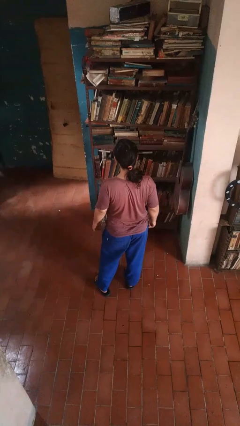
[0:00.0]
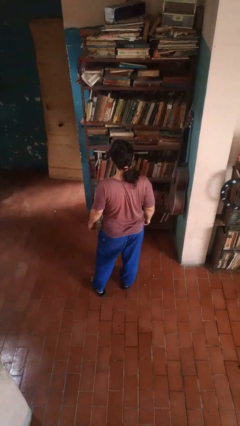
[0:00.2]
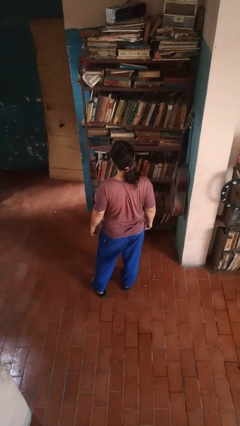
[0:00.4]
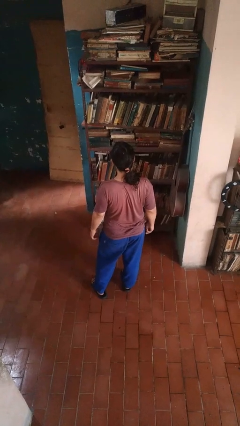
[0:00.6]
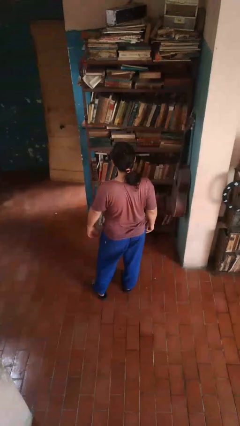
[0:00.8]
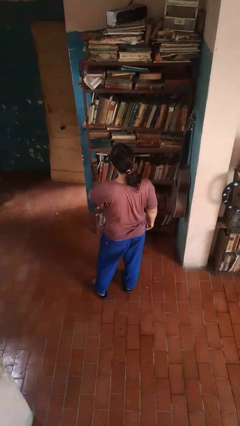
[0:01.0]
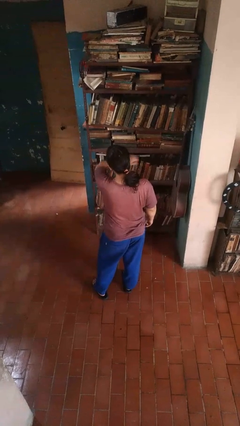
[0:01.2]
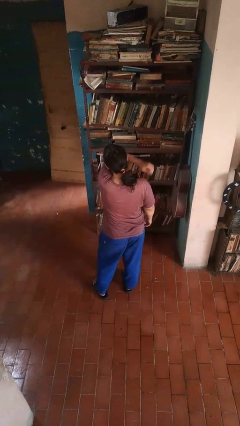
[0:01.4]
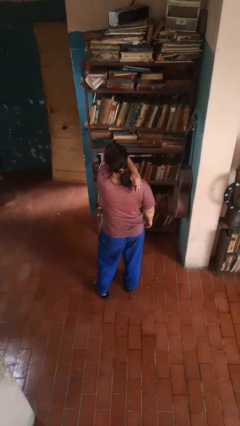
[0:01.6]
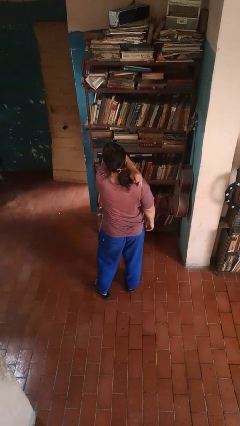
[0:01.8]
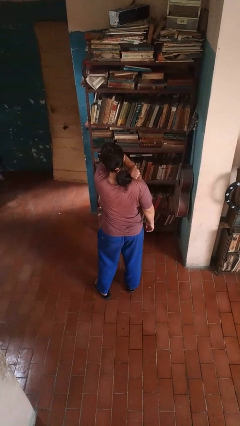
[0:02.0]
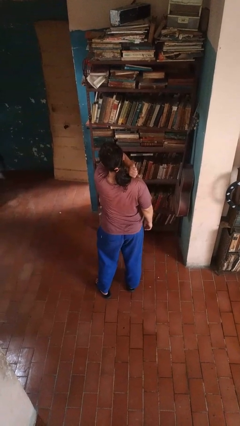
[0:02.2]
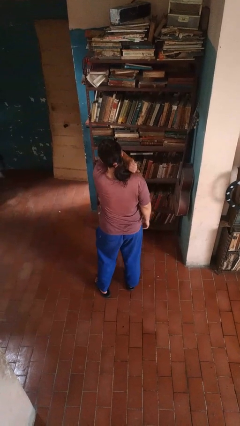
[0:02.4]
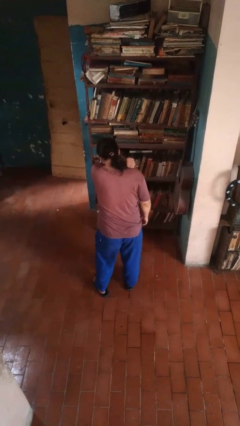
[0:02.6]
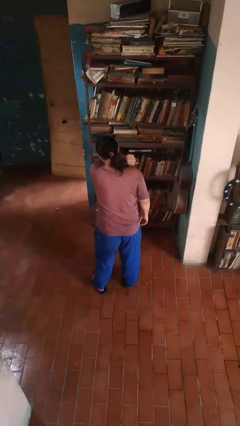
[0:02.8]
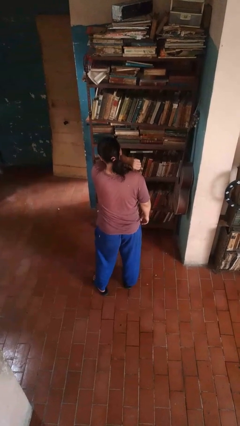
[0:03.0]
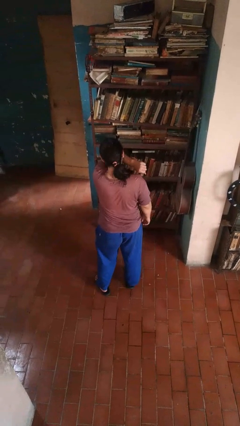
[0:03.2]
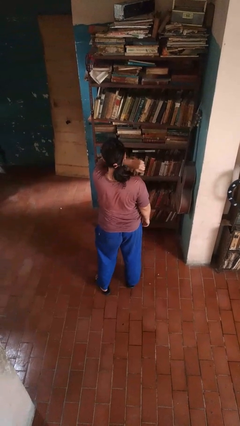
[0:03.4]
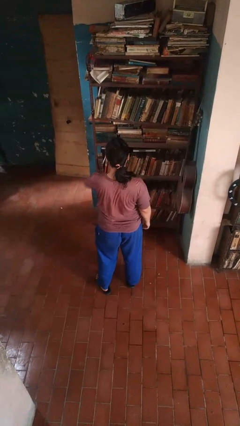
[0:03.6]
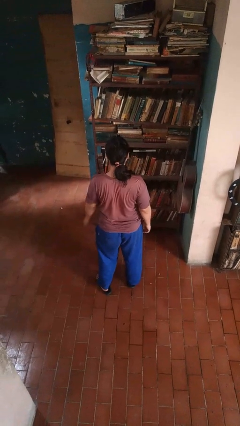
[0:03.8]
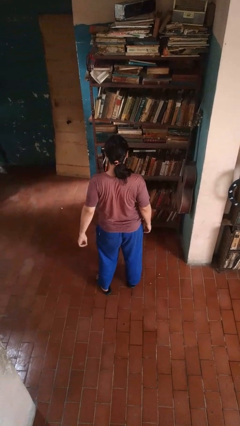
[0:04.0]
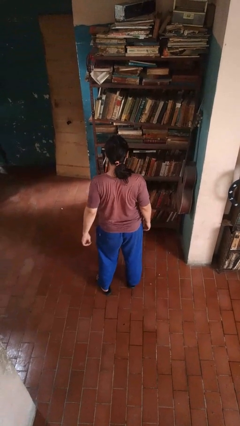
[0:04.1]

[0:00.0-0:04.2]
person sneezes into arm

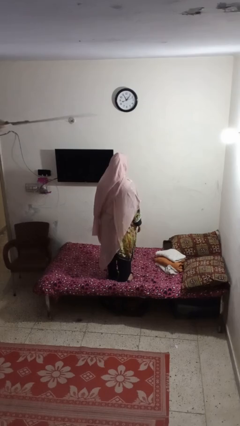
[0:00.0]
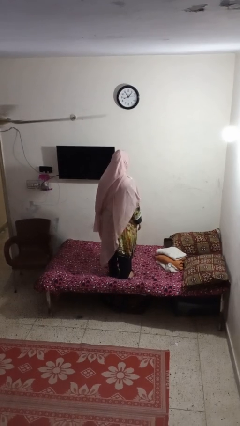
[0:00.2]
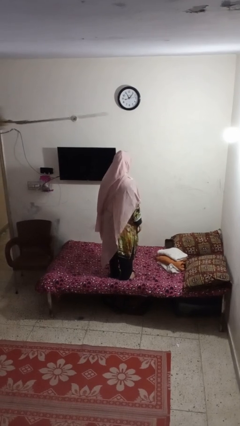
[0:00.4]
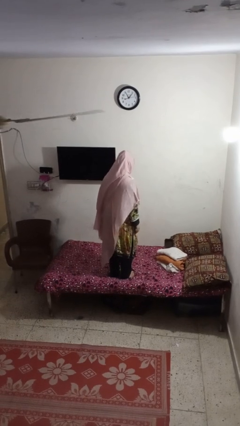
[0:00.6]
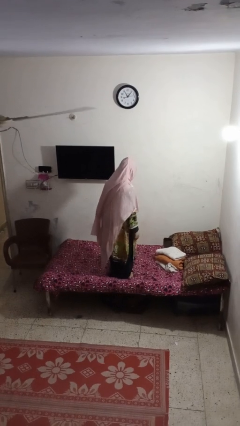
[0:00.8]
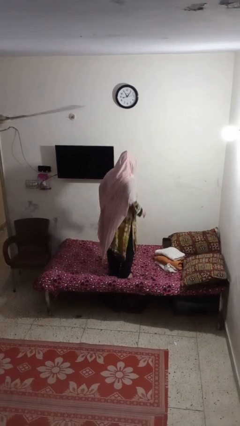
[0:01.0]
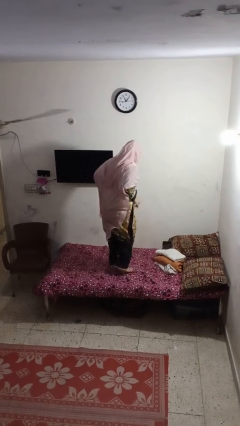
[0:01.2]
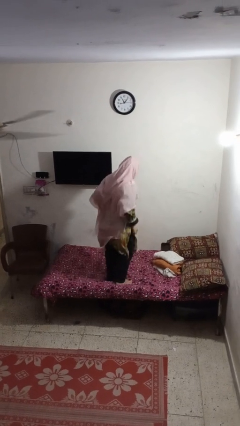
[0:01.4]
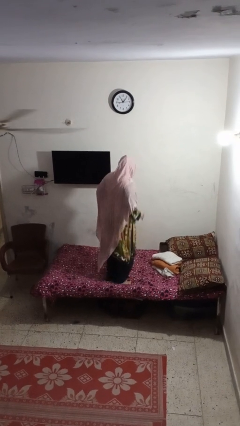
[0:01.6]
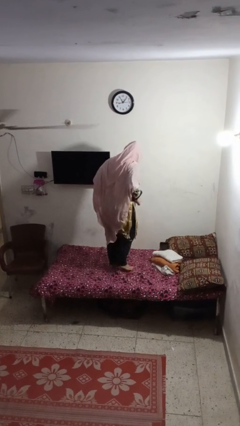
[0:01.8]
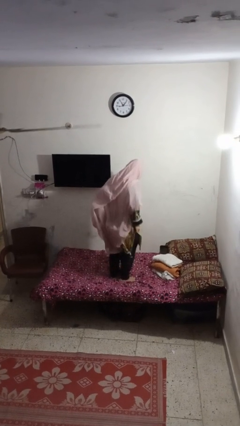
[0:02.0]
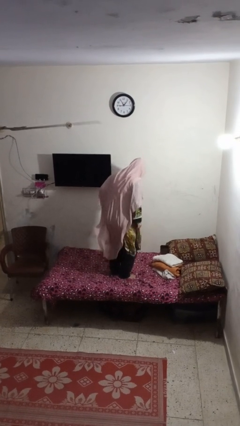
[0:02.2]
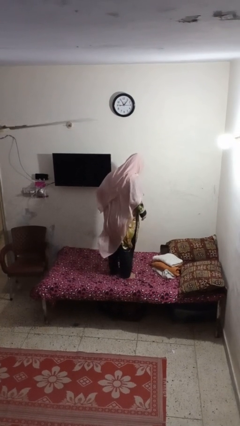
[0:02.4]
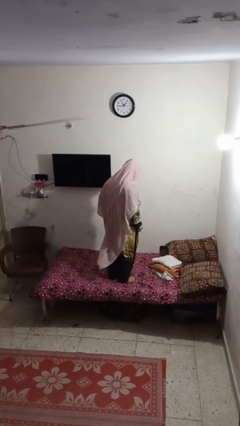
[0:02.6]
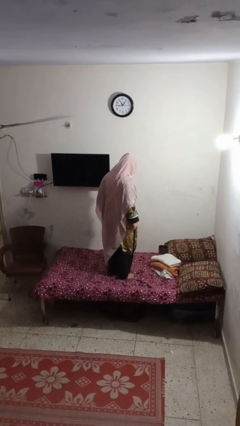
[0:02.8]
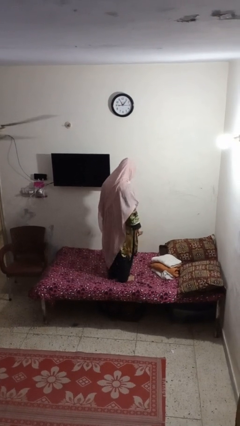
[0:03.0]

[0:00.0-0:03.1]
person jumps on bed

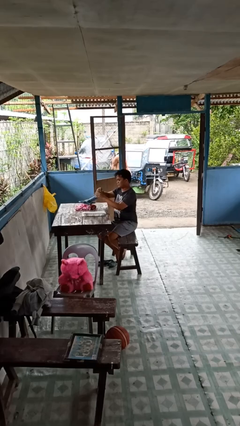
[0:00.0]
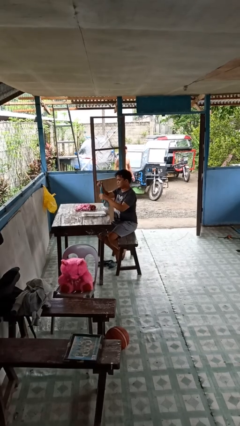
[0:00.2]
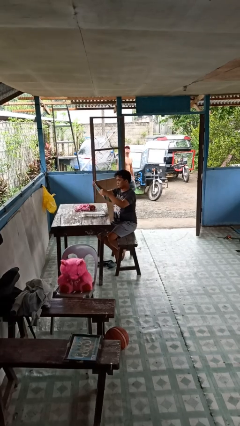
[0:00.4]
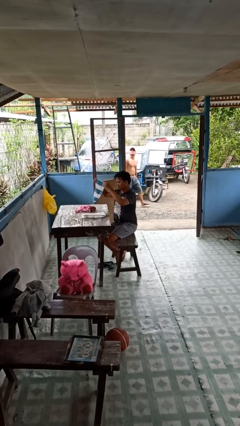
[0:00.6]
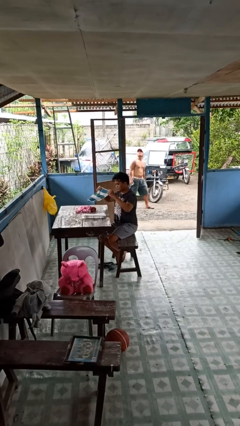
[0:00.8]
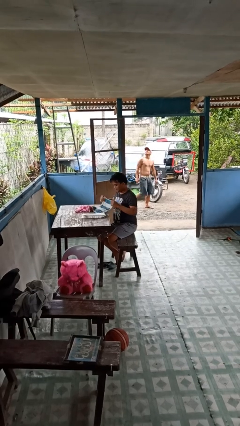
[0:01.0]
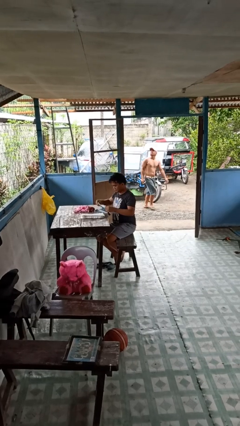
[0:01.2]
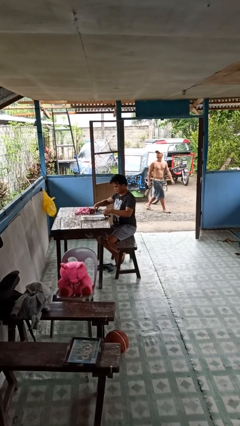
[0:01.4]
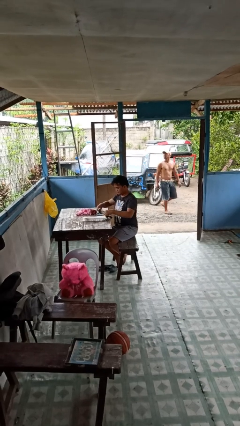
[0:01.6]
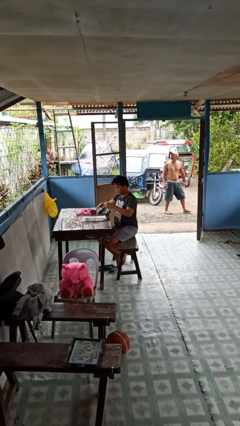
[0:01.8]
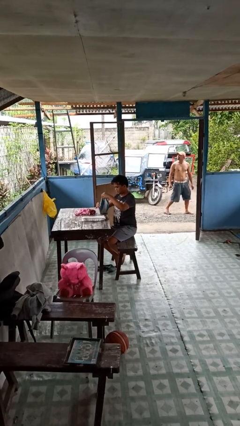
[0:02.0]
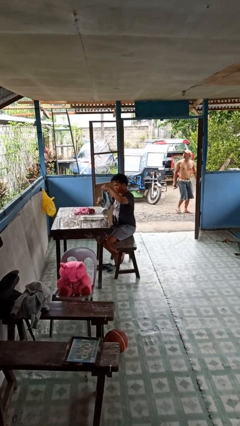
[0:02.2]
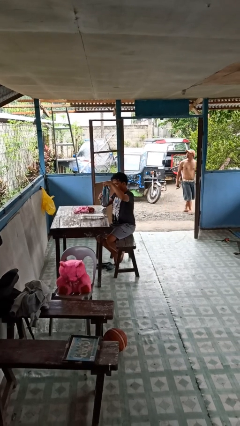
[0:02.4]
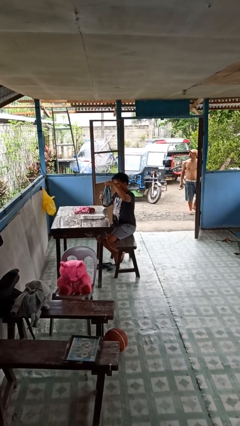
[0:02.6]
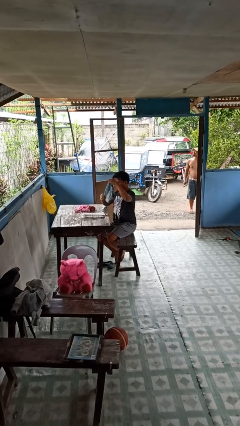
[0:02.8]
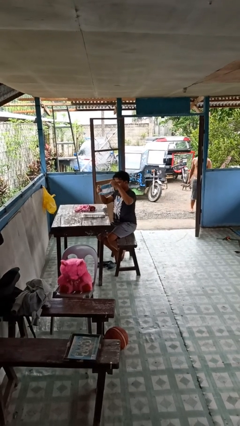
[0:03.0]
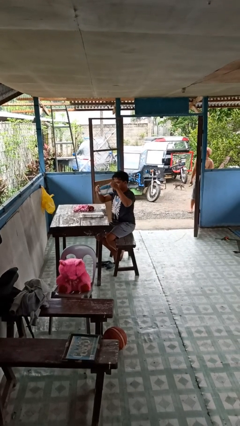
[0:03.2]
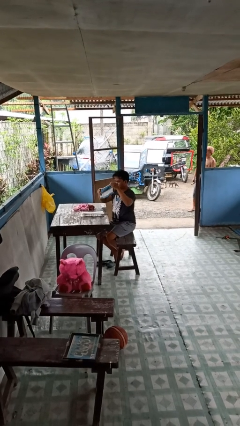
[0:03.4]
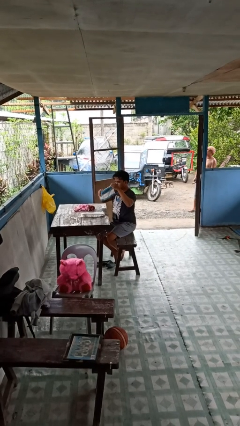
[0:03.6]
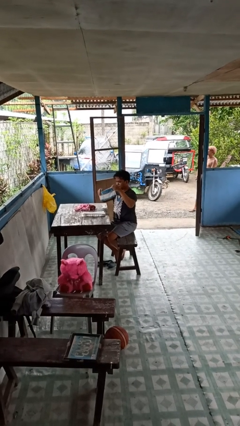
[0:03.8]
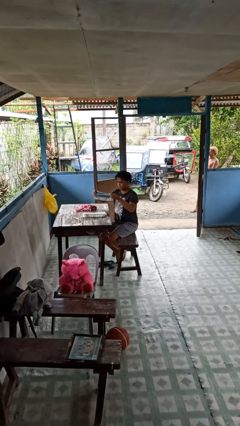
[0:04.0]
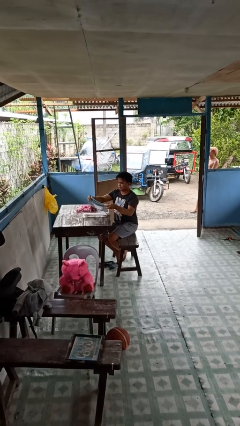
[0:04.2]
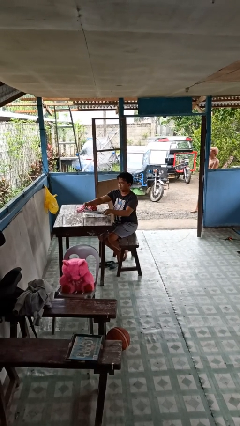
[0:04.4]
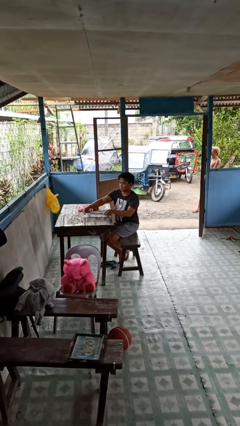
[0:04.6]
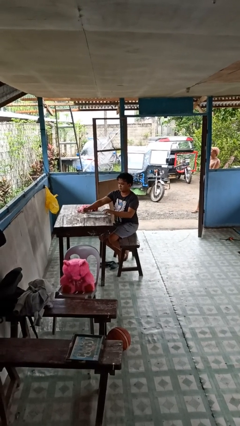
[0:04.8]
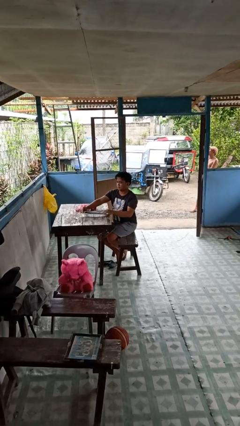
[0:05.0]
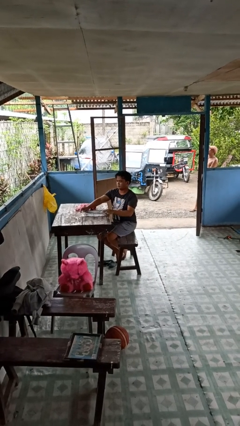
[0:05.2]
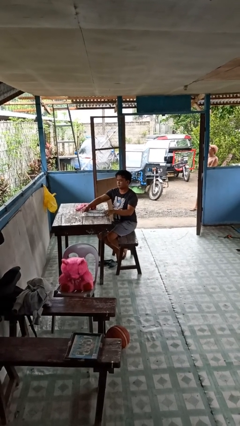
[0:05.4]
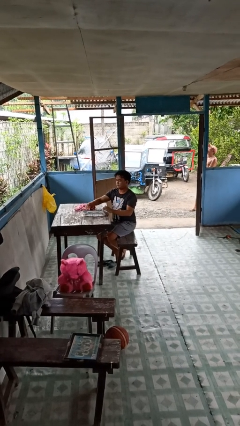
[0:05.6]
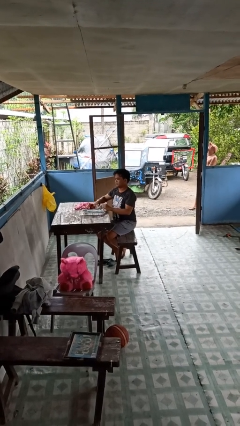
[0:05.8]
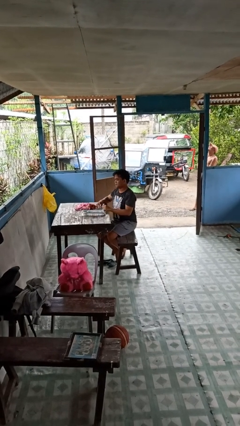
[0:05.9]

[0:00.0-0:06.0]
person folds towel

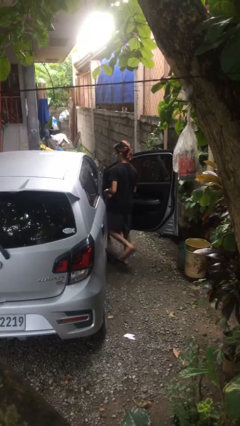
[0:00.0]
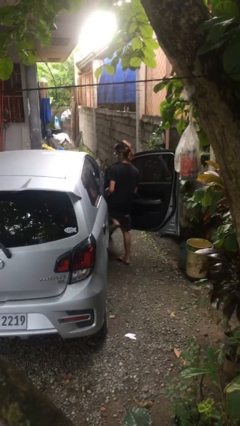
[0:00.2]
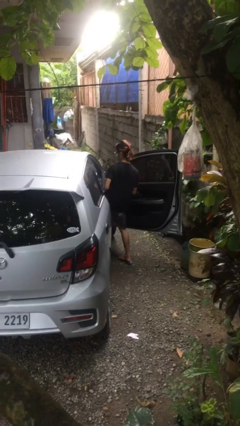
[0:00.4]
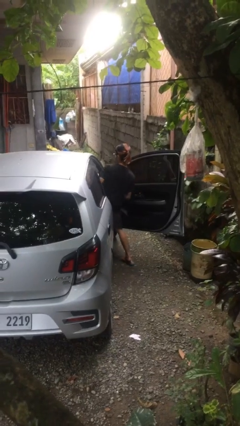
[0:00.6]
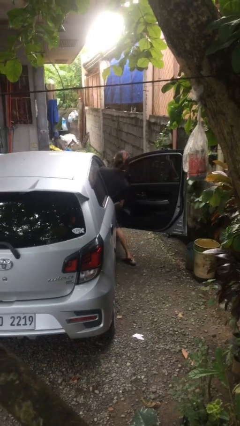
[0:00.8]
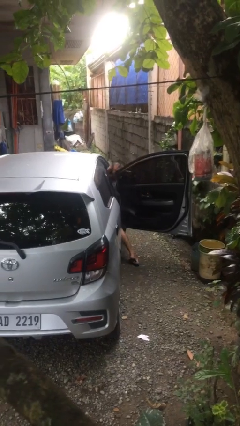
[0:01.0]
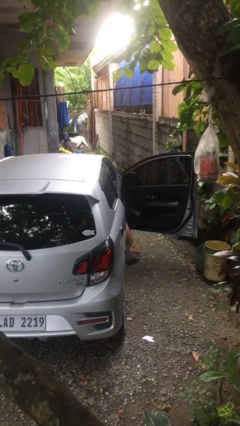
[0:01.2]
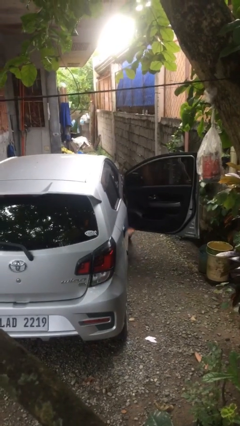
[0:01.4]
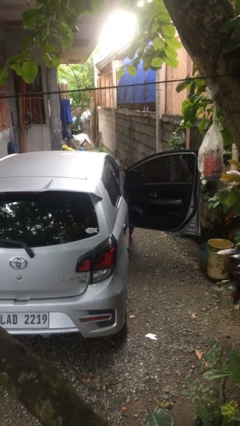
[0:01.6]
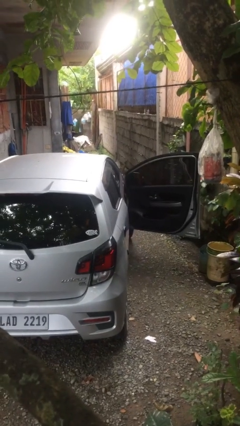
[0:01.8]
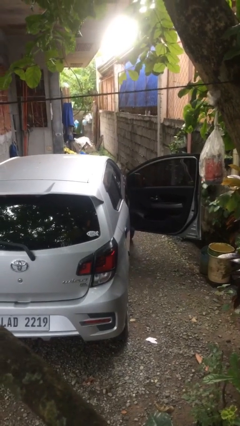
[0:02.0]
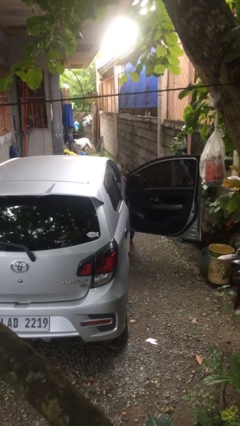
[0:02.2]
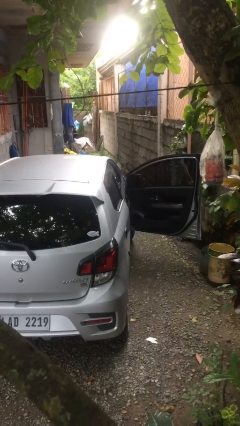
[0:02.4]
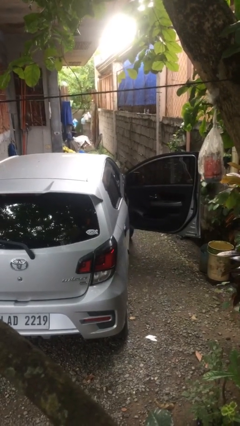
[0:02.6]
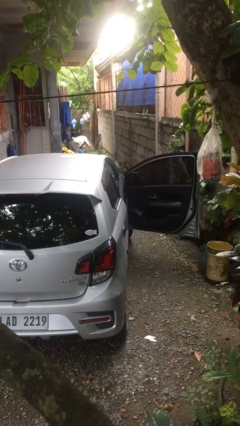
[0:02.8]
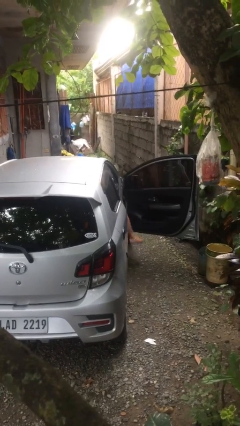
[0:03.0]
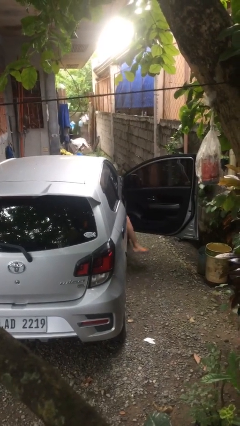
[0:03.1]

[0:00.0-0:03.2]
person enters car

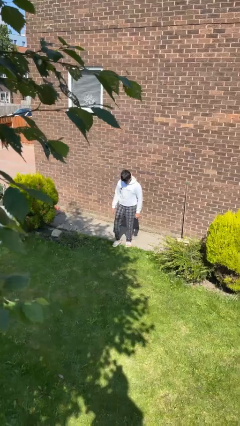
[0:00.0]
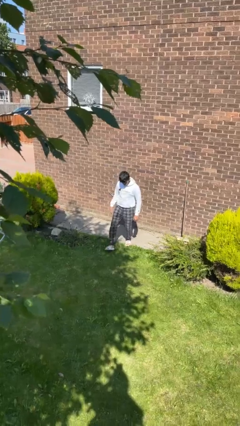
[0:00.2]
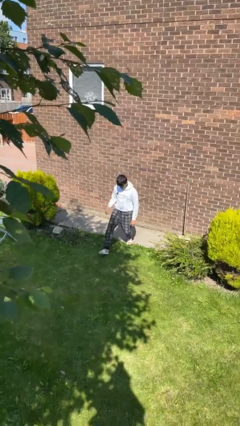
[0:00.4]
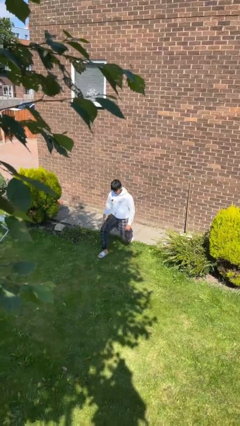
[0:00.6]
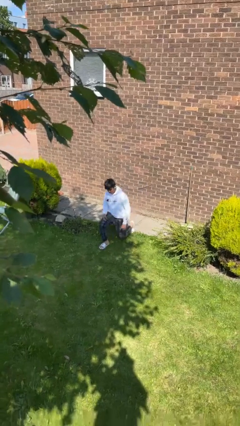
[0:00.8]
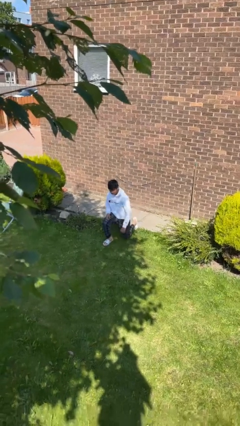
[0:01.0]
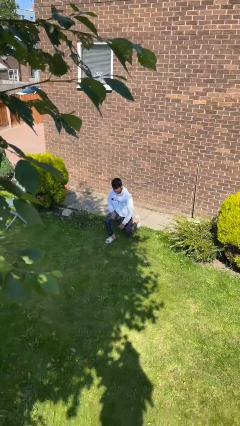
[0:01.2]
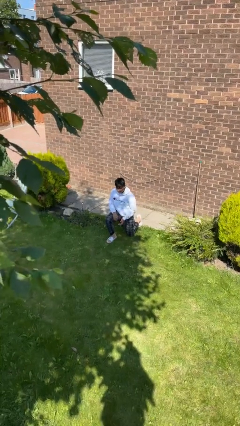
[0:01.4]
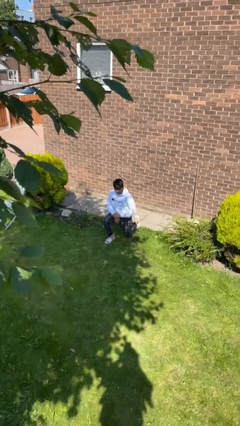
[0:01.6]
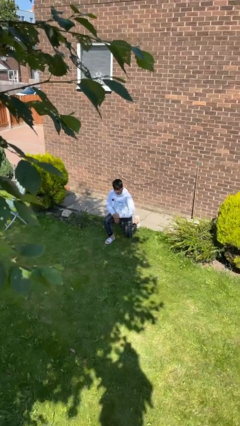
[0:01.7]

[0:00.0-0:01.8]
person kneels
